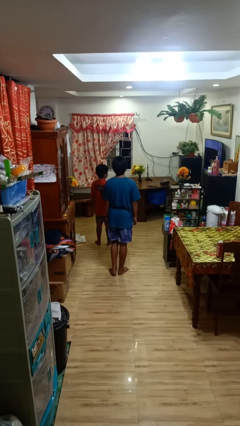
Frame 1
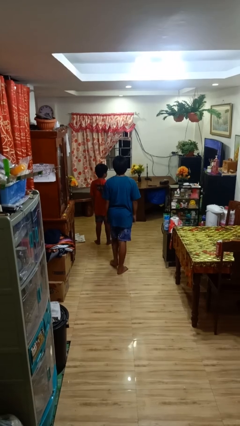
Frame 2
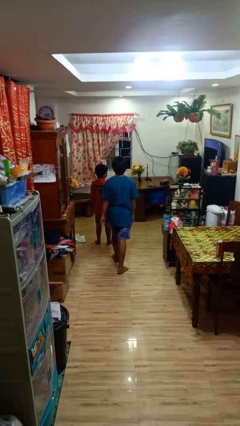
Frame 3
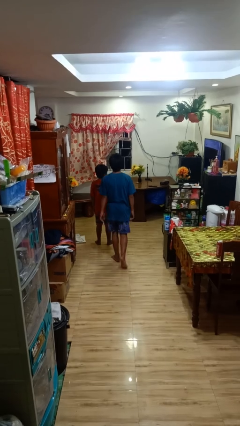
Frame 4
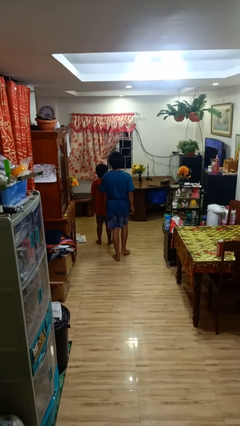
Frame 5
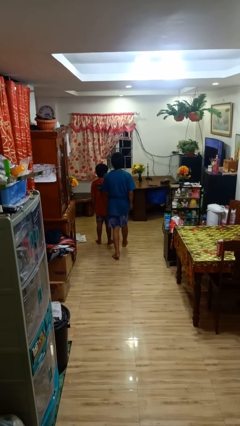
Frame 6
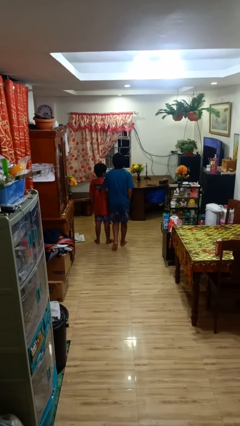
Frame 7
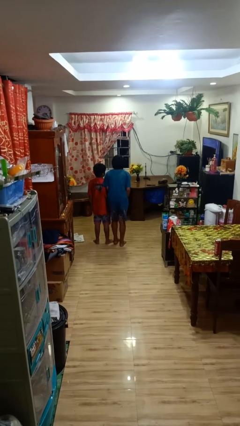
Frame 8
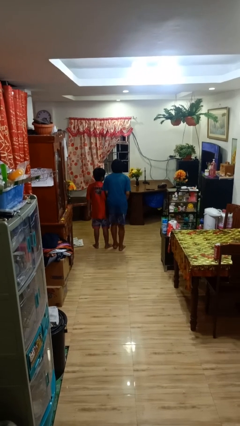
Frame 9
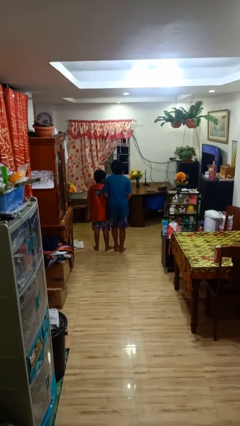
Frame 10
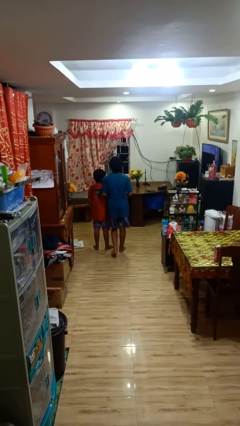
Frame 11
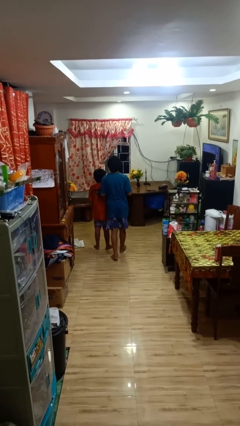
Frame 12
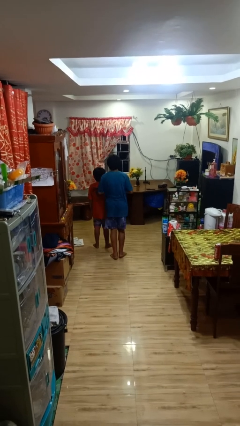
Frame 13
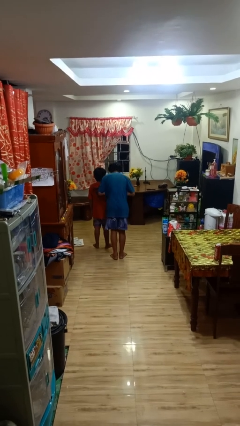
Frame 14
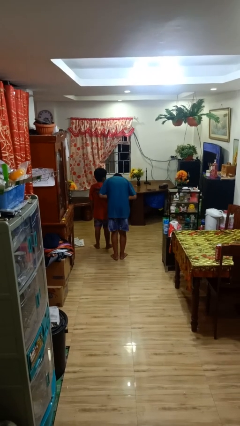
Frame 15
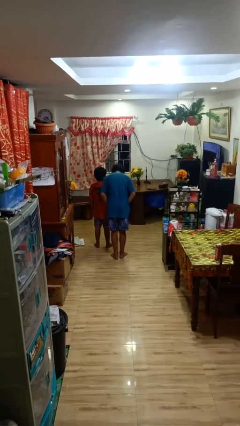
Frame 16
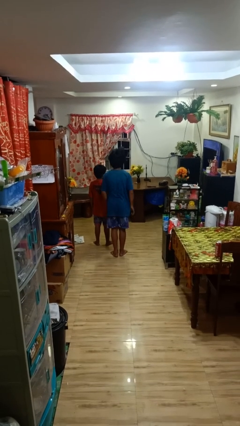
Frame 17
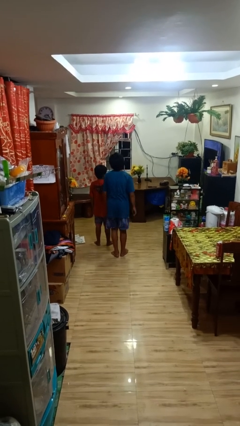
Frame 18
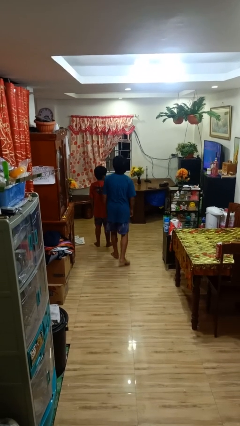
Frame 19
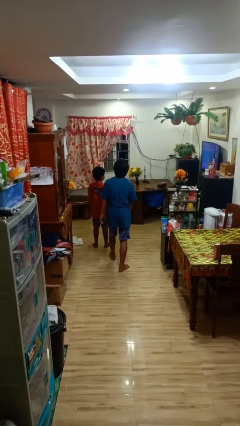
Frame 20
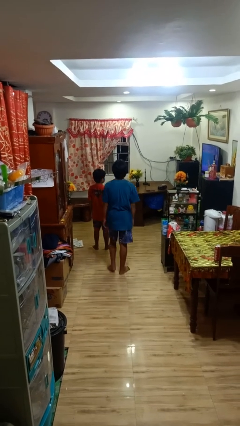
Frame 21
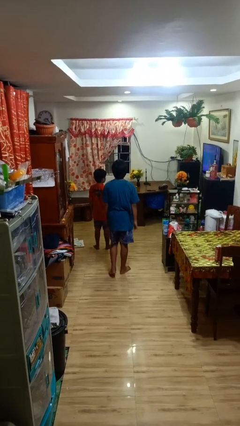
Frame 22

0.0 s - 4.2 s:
person bumps into person

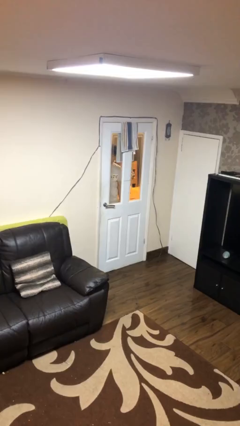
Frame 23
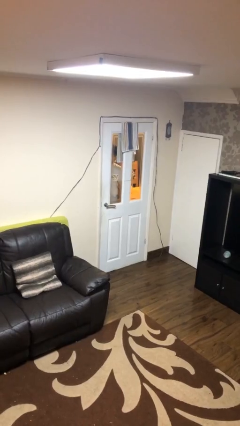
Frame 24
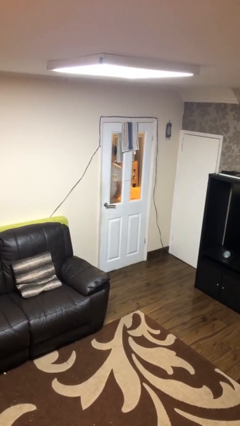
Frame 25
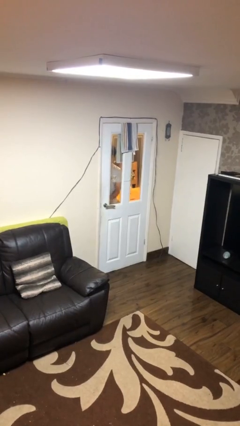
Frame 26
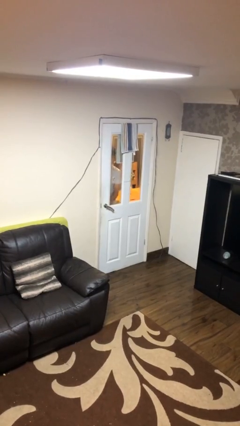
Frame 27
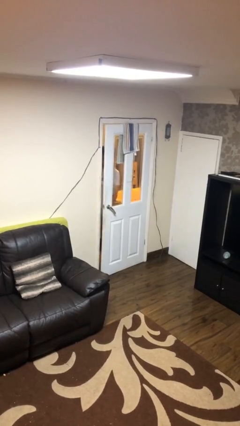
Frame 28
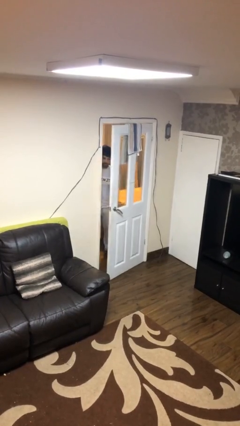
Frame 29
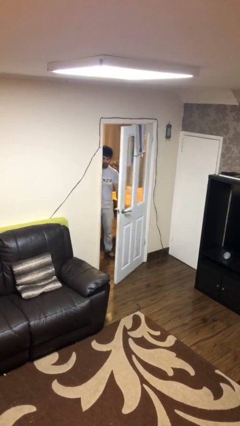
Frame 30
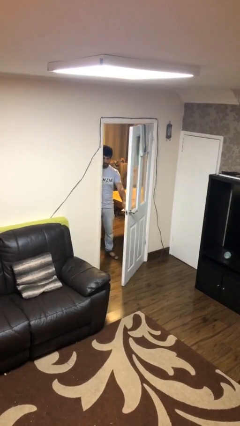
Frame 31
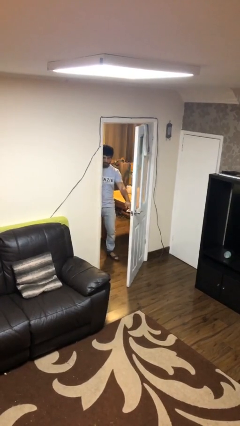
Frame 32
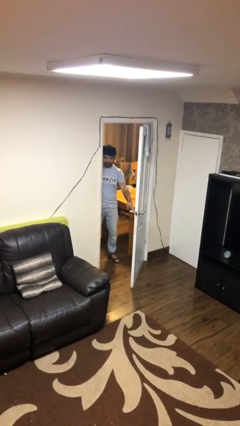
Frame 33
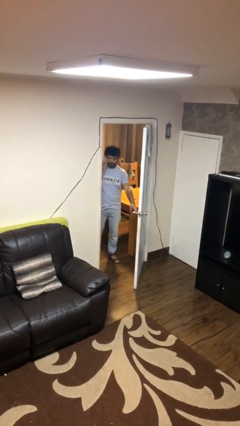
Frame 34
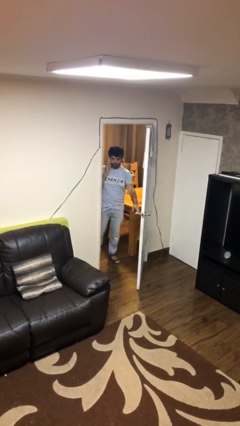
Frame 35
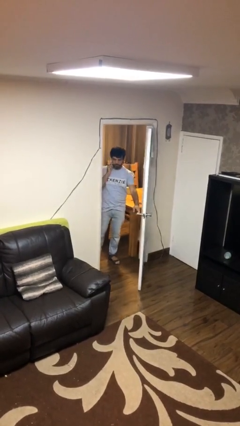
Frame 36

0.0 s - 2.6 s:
person opens facility door

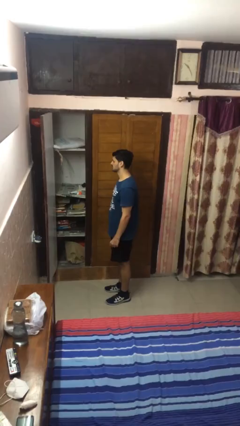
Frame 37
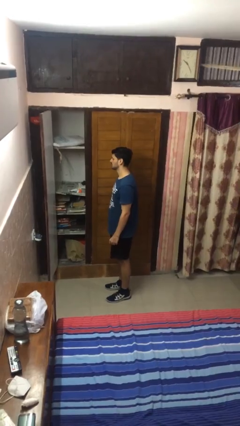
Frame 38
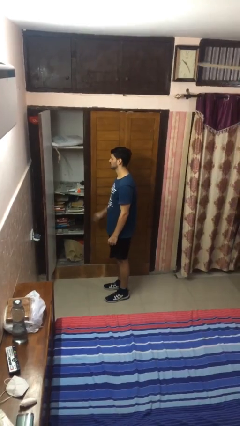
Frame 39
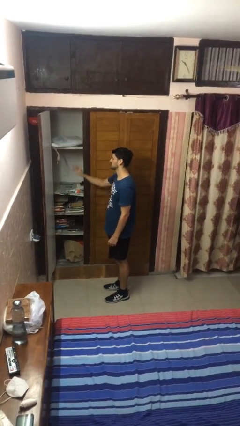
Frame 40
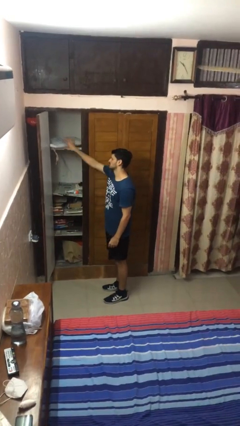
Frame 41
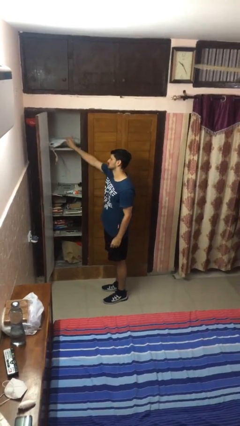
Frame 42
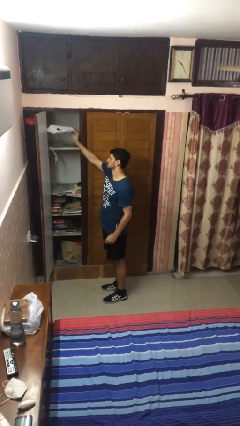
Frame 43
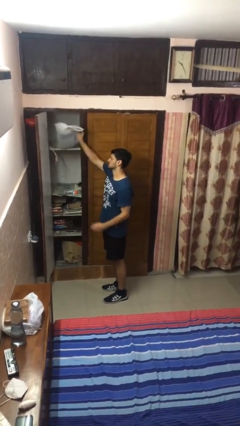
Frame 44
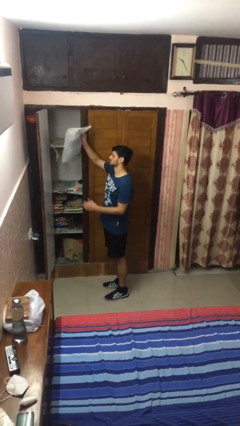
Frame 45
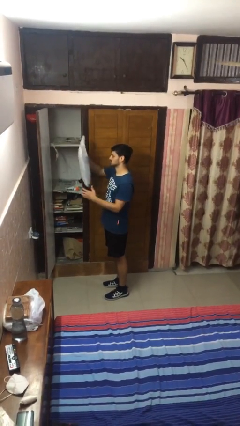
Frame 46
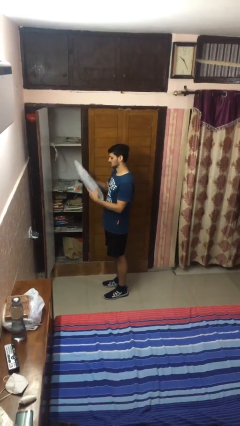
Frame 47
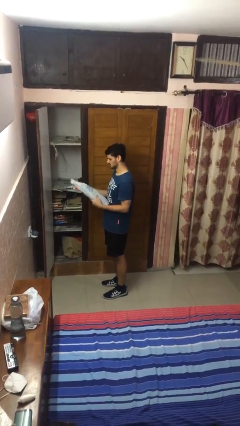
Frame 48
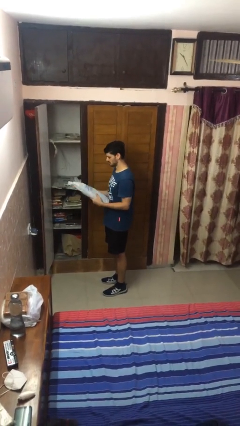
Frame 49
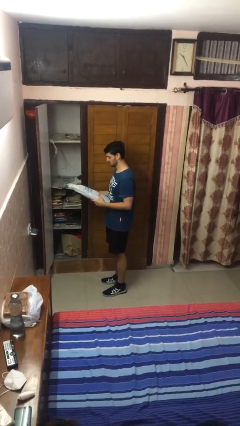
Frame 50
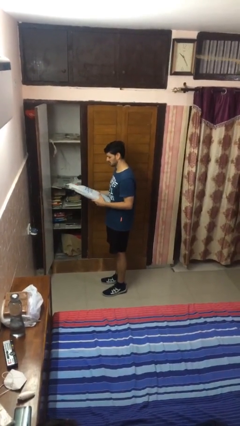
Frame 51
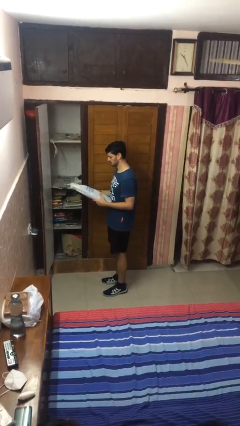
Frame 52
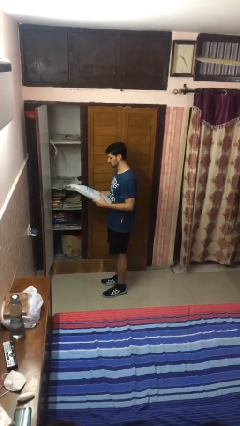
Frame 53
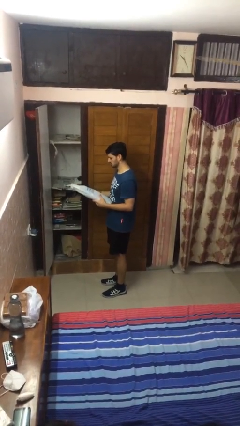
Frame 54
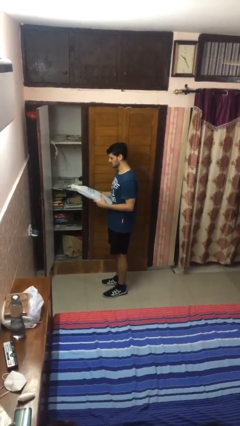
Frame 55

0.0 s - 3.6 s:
person picks up object from shelf

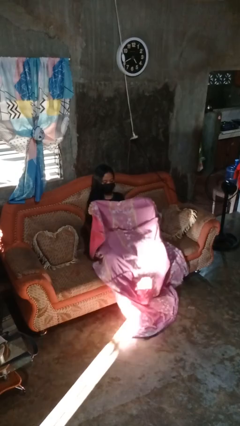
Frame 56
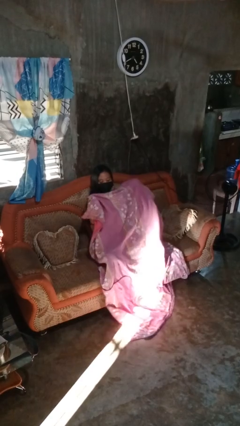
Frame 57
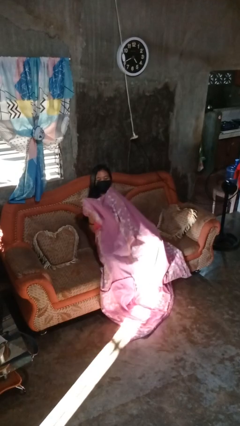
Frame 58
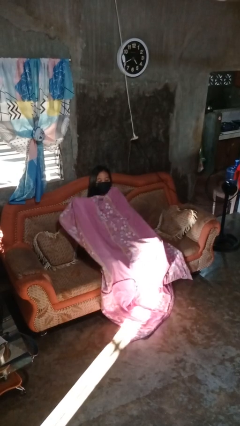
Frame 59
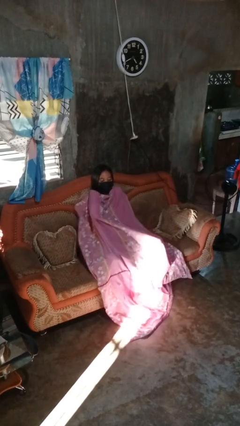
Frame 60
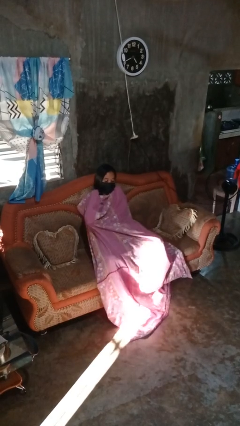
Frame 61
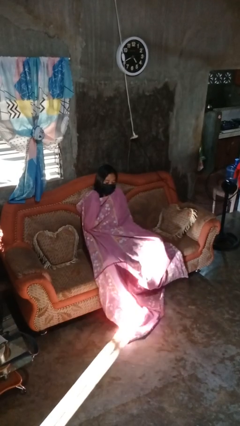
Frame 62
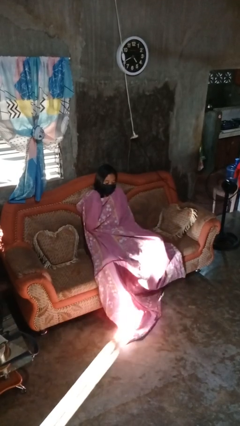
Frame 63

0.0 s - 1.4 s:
person covers with blanket

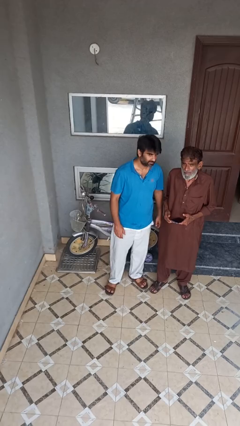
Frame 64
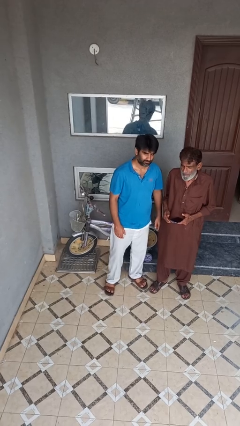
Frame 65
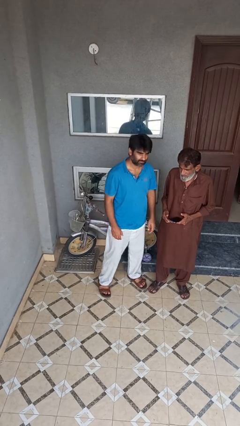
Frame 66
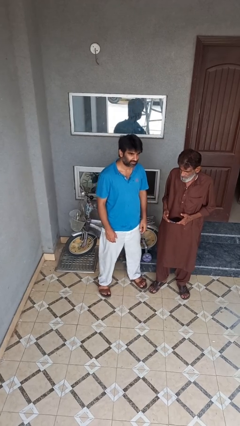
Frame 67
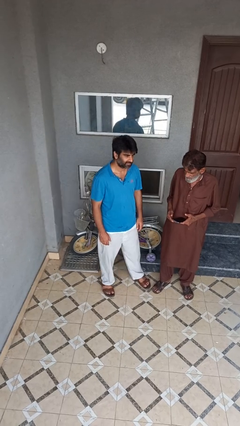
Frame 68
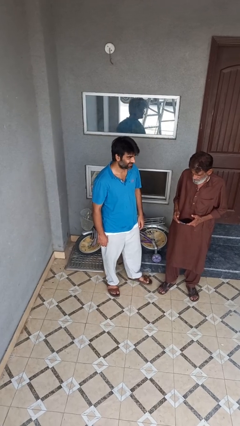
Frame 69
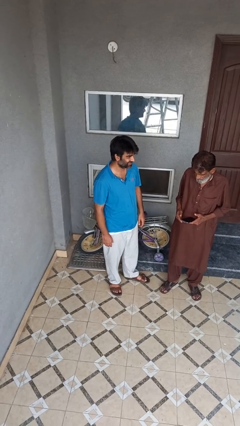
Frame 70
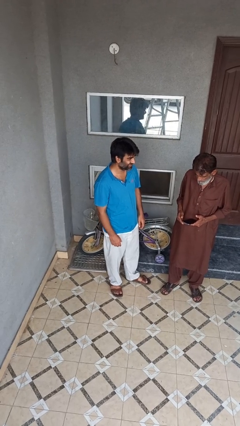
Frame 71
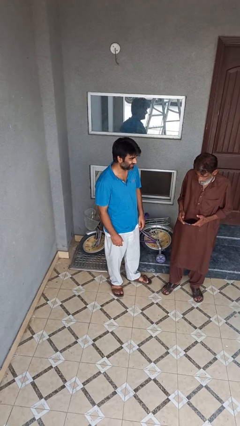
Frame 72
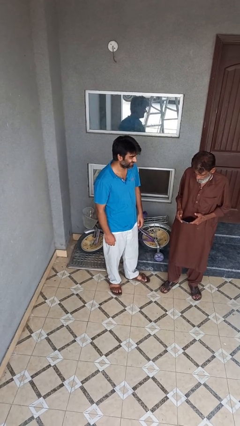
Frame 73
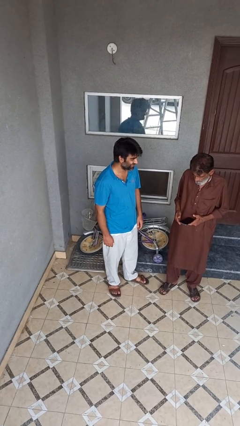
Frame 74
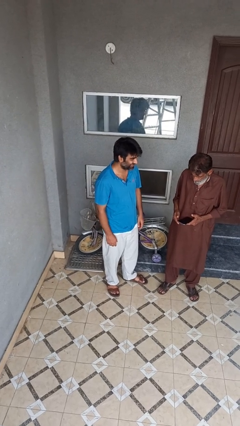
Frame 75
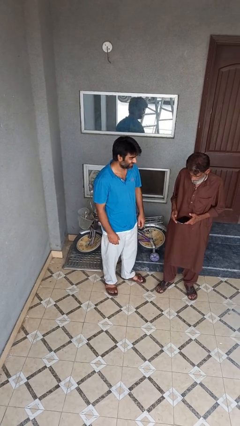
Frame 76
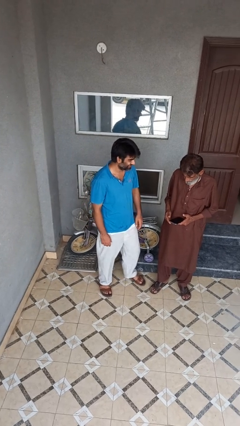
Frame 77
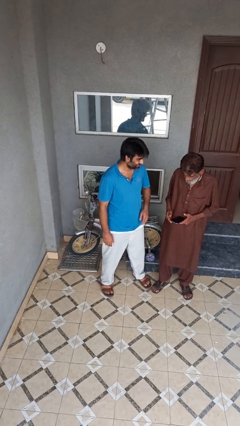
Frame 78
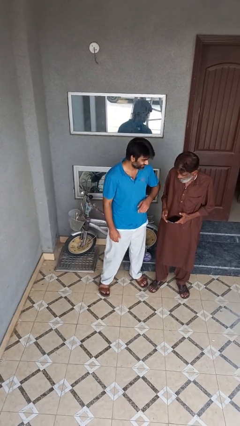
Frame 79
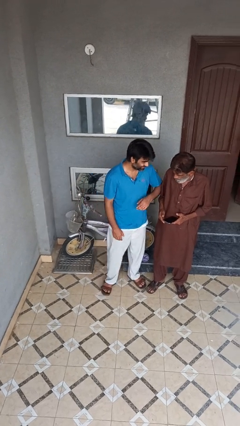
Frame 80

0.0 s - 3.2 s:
person kisses cheek of person

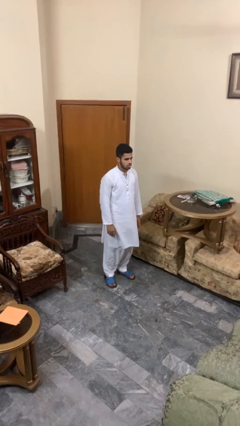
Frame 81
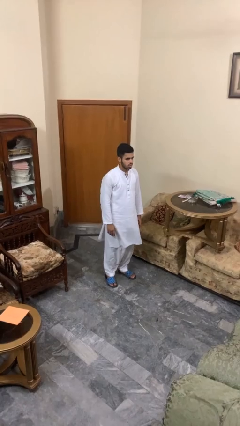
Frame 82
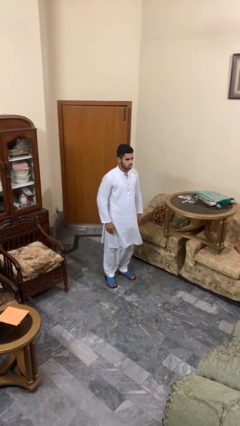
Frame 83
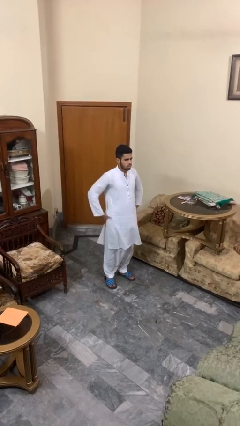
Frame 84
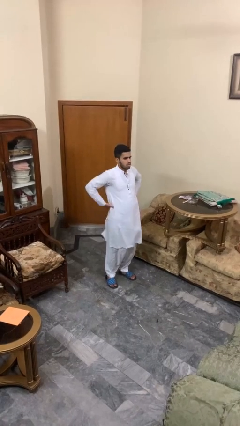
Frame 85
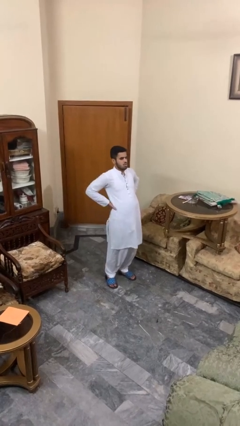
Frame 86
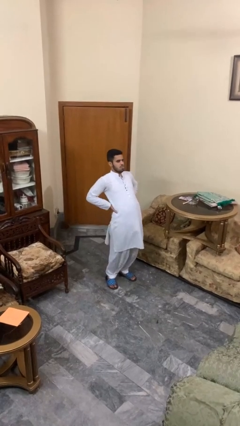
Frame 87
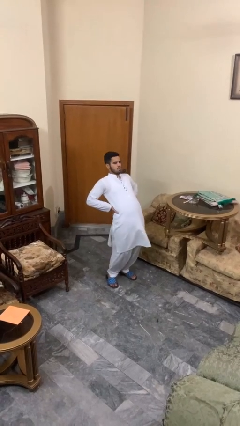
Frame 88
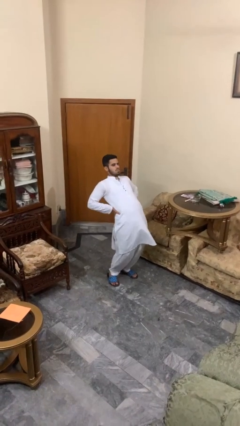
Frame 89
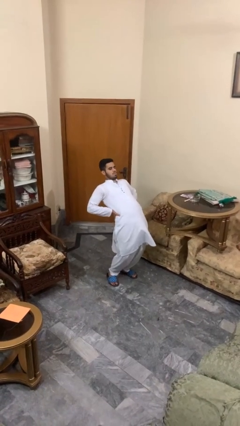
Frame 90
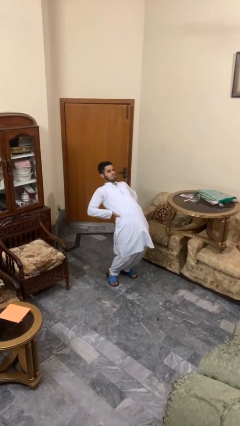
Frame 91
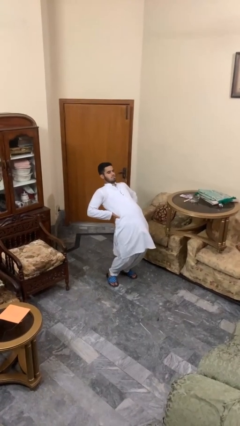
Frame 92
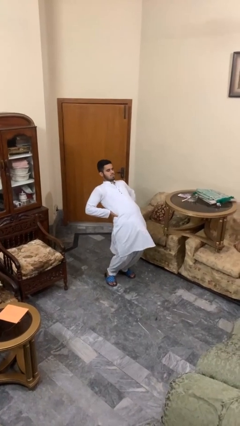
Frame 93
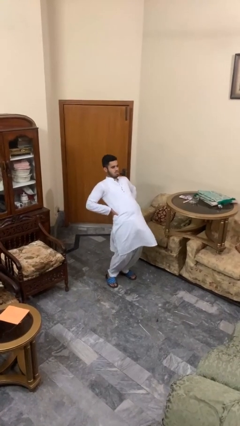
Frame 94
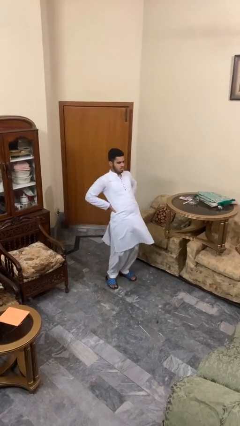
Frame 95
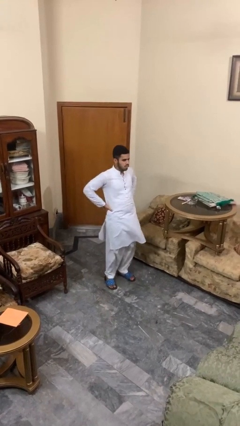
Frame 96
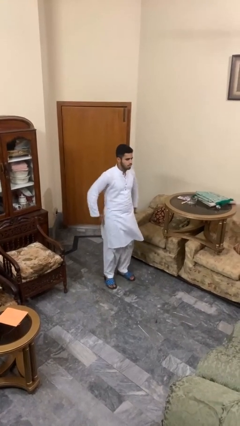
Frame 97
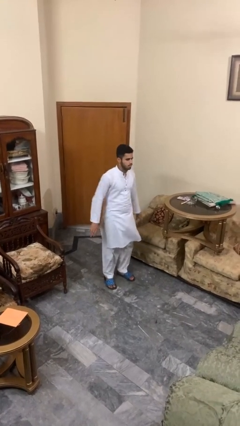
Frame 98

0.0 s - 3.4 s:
person stretches back
